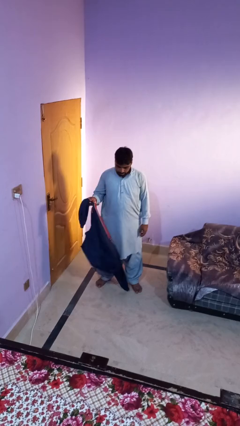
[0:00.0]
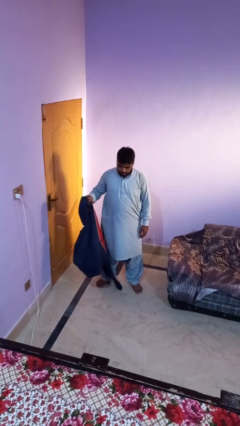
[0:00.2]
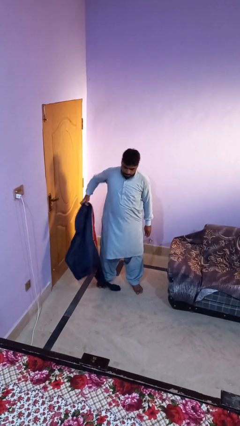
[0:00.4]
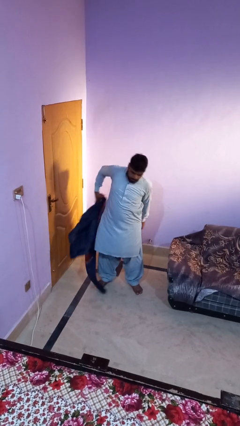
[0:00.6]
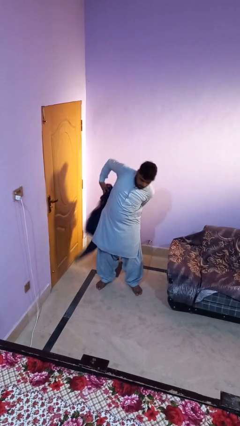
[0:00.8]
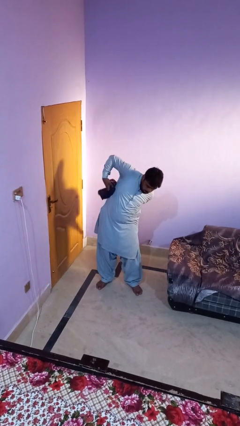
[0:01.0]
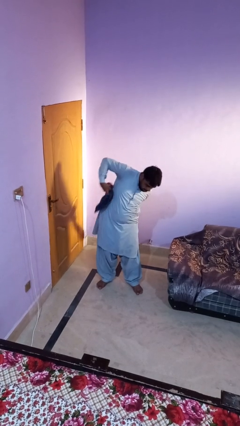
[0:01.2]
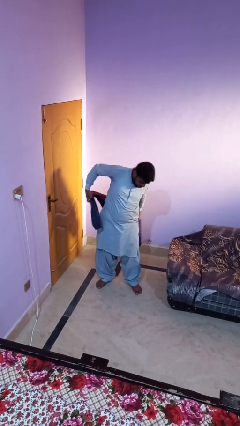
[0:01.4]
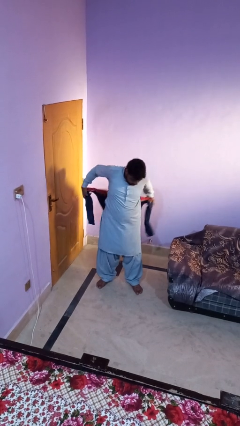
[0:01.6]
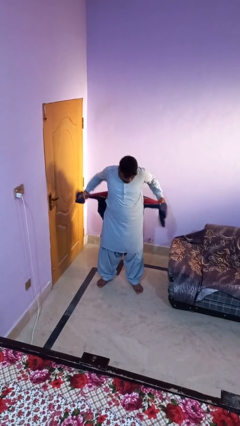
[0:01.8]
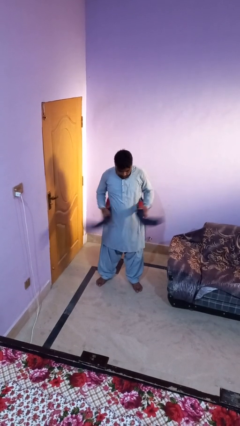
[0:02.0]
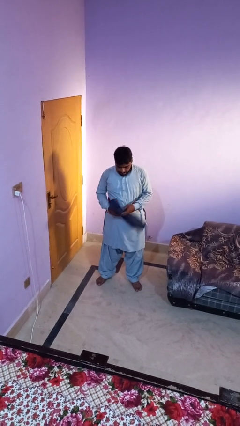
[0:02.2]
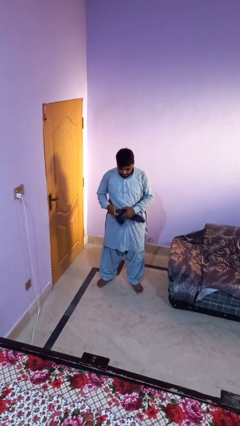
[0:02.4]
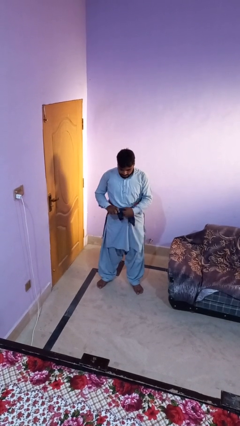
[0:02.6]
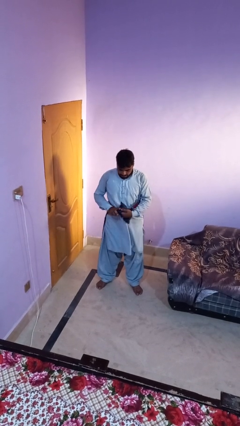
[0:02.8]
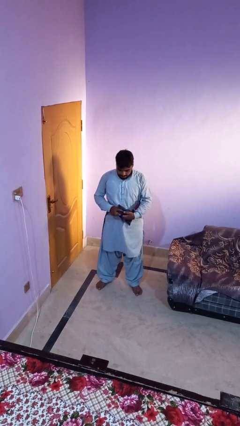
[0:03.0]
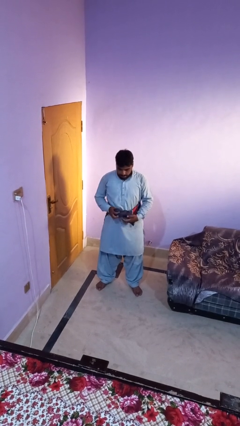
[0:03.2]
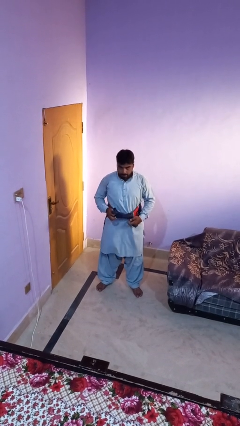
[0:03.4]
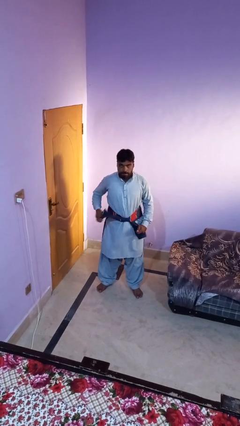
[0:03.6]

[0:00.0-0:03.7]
person ties jacket around waist

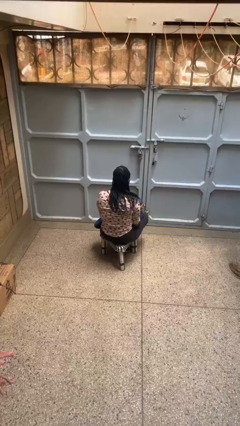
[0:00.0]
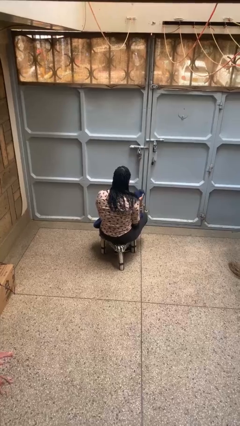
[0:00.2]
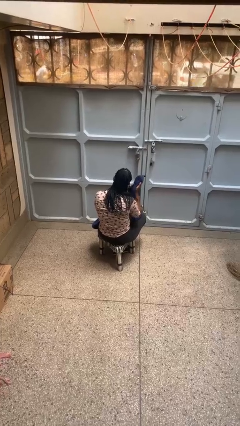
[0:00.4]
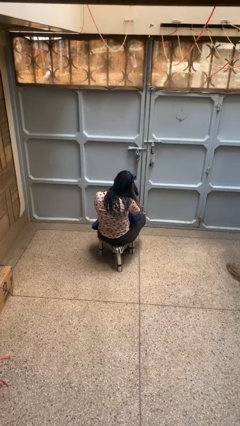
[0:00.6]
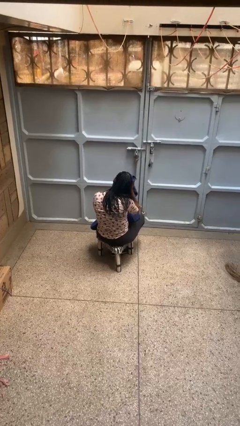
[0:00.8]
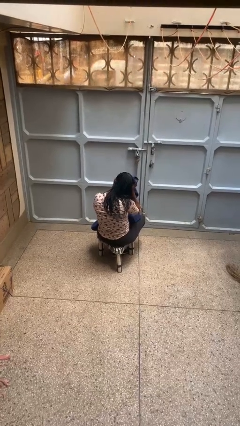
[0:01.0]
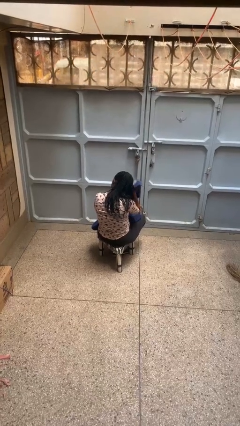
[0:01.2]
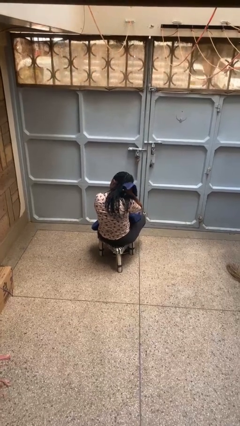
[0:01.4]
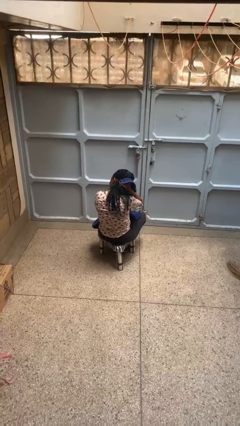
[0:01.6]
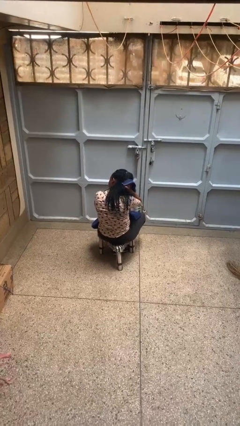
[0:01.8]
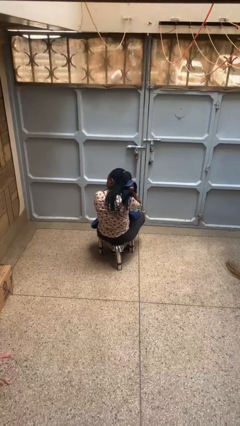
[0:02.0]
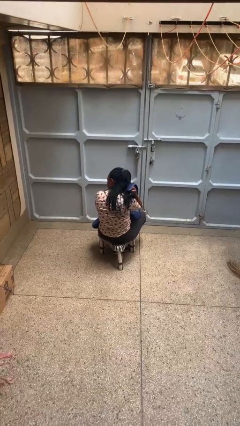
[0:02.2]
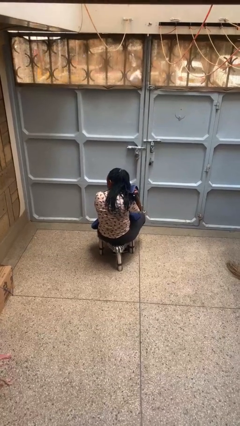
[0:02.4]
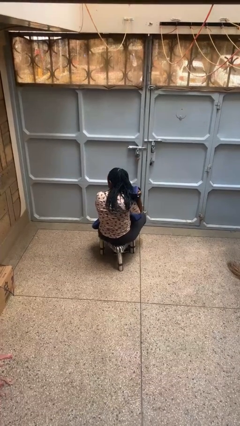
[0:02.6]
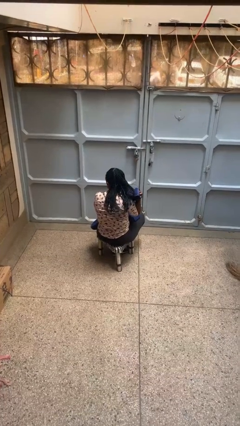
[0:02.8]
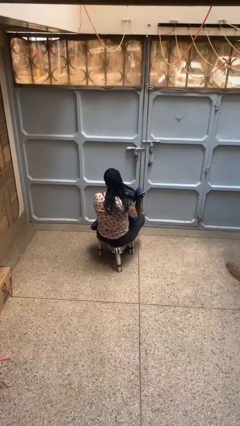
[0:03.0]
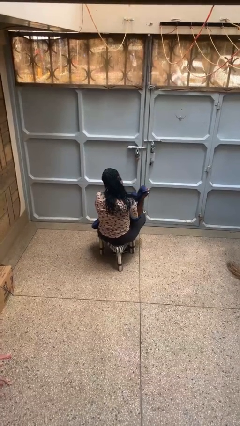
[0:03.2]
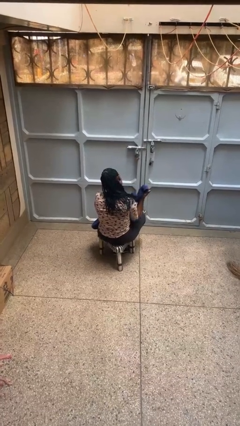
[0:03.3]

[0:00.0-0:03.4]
person dries hair with towel

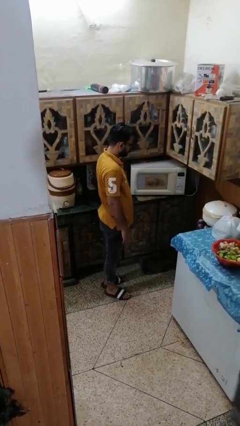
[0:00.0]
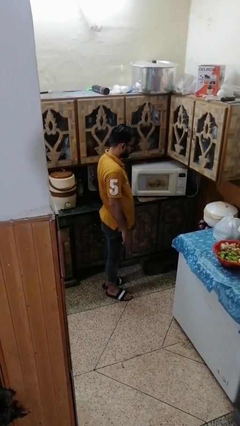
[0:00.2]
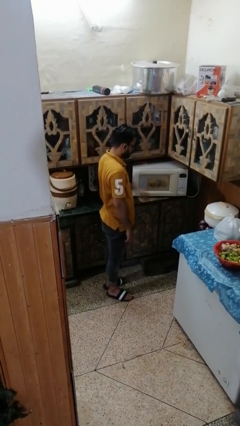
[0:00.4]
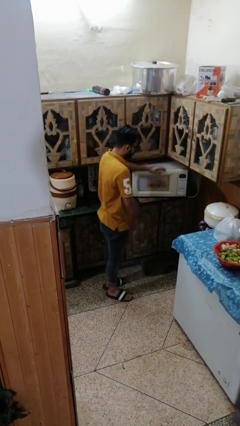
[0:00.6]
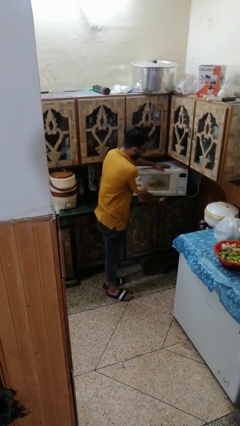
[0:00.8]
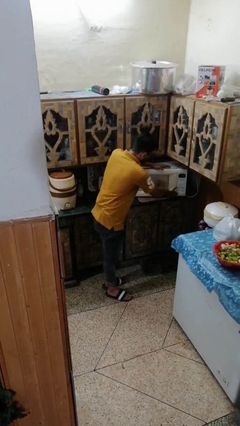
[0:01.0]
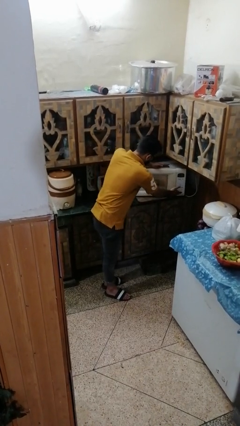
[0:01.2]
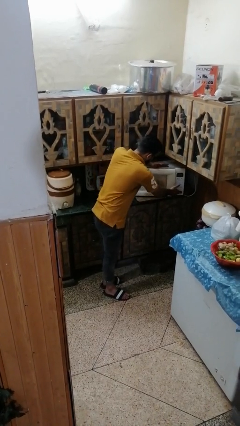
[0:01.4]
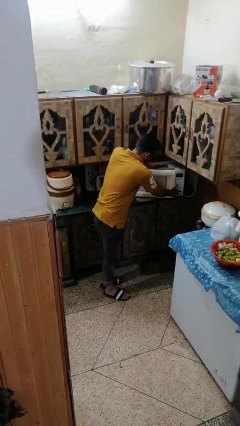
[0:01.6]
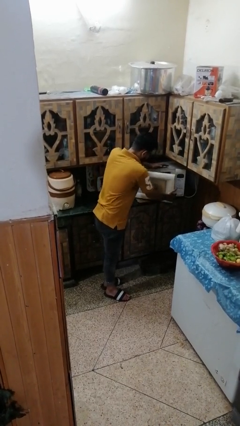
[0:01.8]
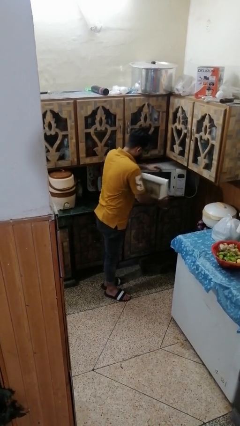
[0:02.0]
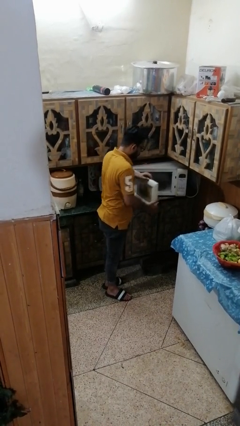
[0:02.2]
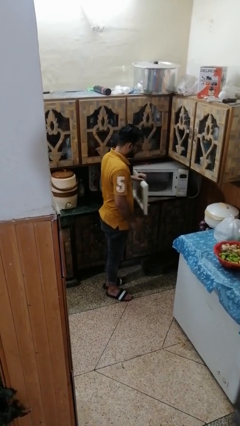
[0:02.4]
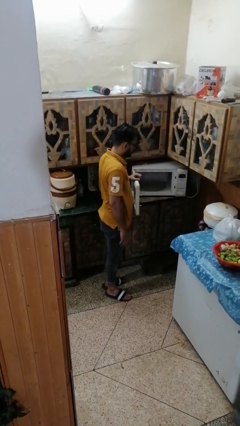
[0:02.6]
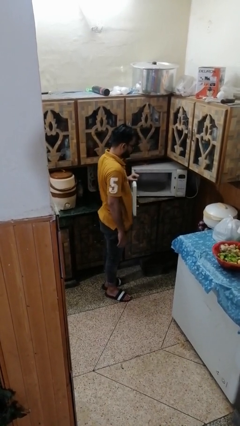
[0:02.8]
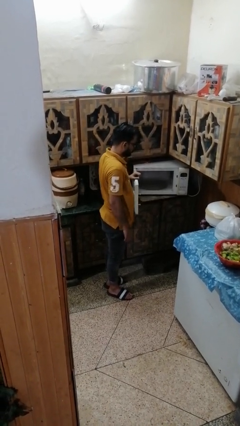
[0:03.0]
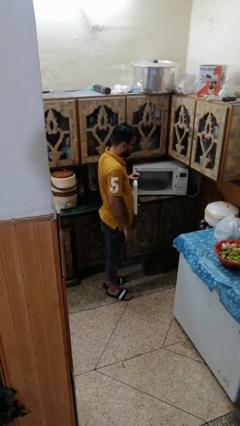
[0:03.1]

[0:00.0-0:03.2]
person opens microwave

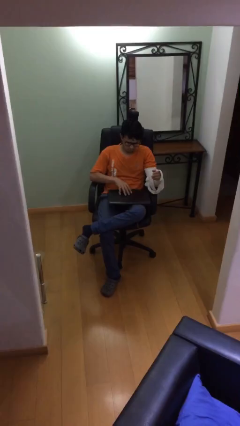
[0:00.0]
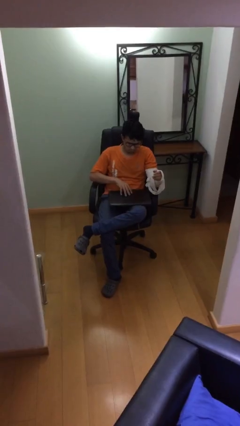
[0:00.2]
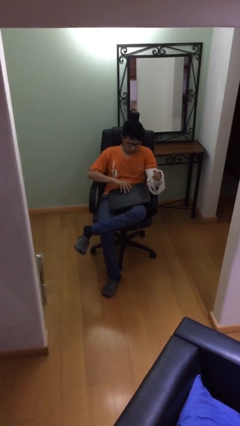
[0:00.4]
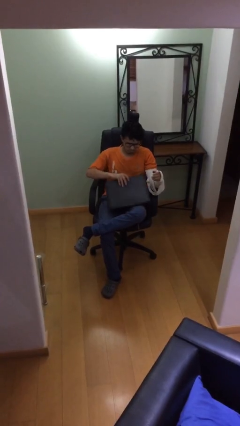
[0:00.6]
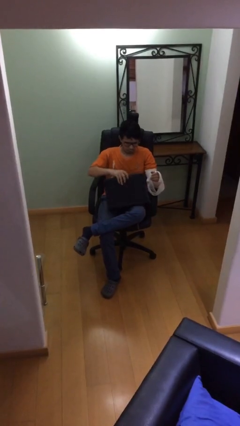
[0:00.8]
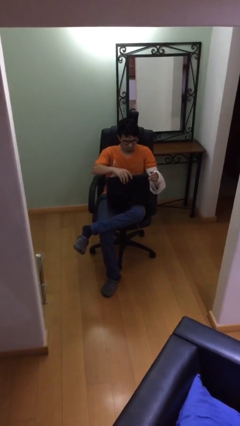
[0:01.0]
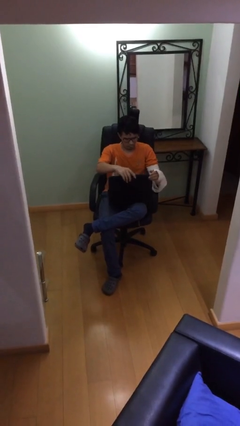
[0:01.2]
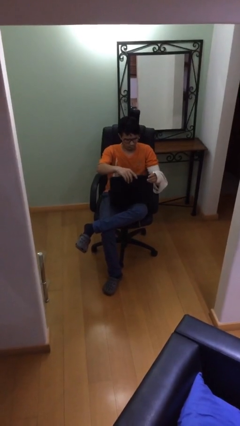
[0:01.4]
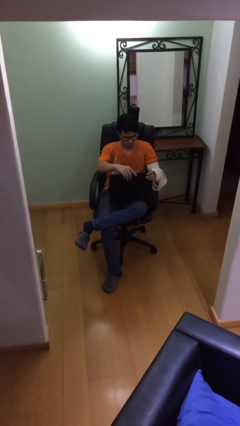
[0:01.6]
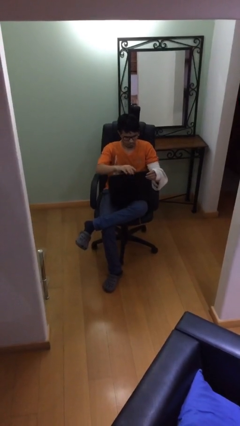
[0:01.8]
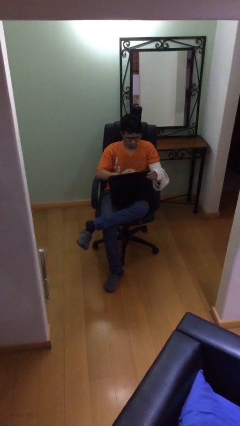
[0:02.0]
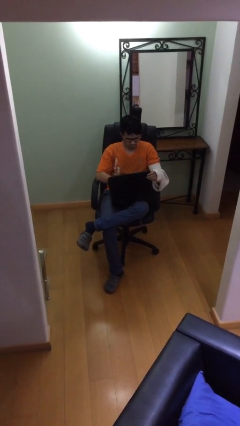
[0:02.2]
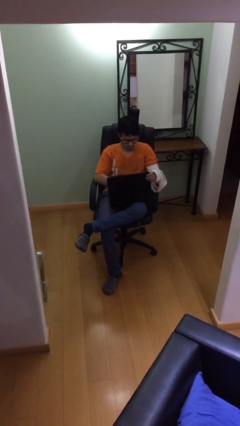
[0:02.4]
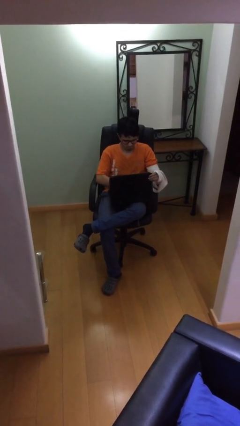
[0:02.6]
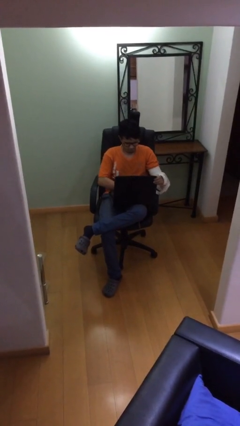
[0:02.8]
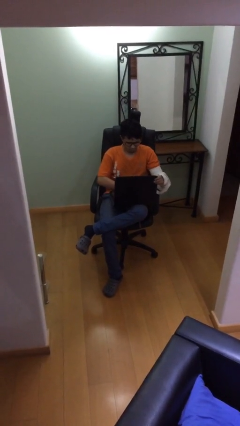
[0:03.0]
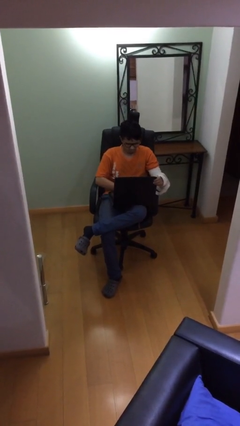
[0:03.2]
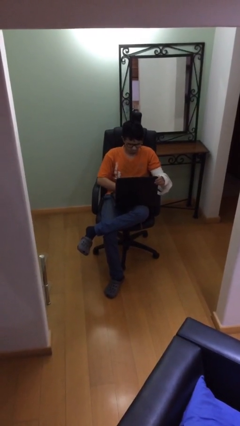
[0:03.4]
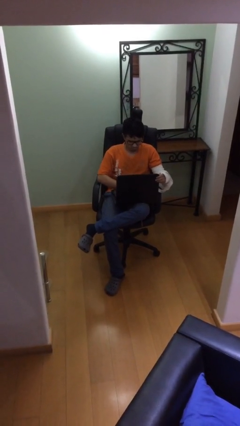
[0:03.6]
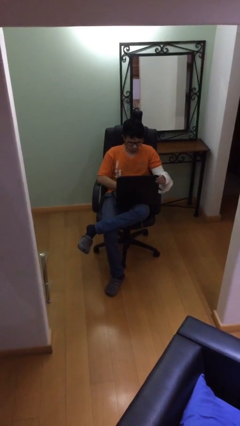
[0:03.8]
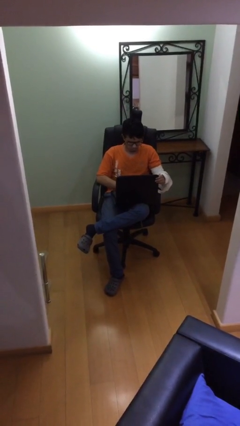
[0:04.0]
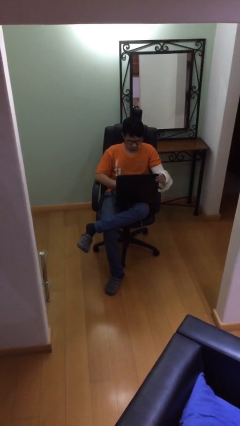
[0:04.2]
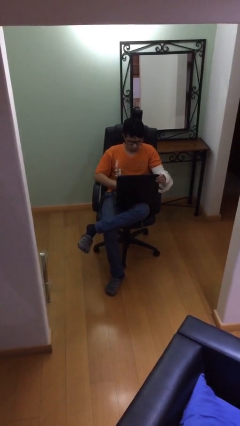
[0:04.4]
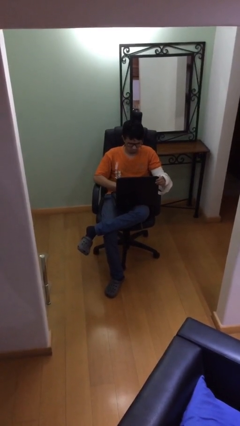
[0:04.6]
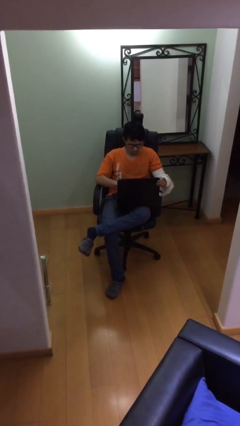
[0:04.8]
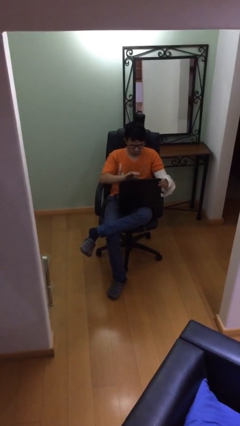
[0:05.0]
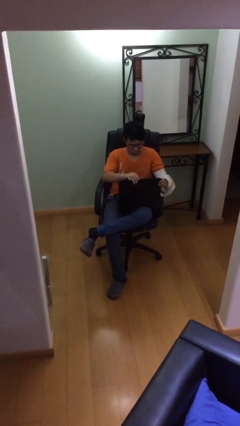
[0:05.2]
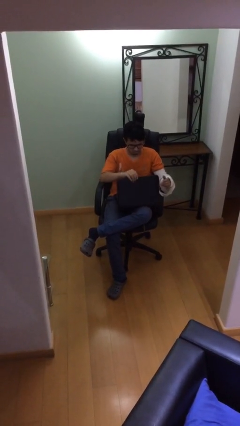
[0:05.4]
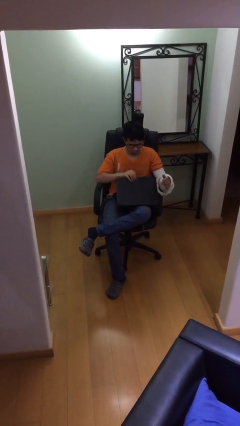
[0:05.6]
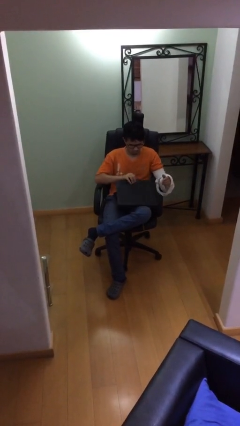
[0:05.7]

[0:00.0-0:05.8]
person interacts with laptop

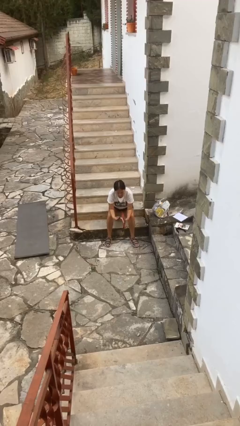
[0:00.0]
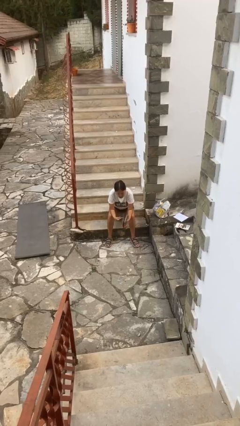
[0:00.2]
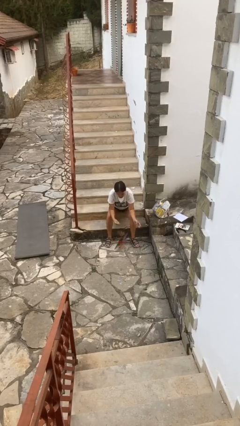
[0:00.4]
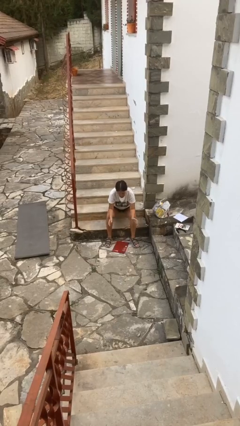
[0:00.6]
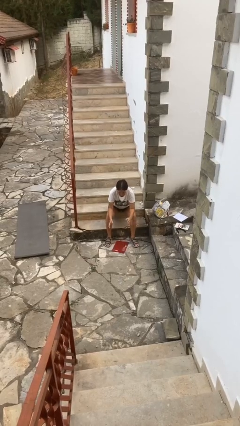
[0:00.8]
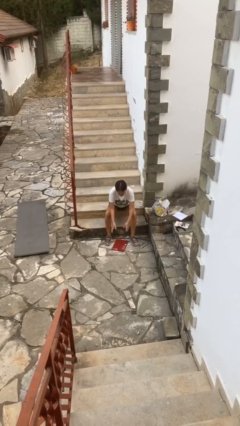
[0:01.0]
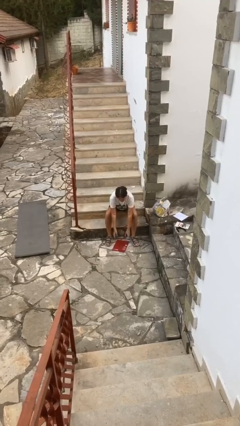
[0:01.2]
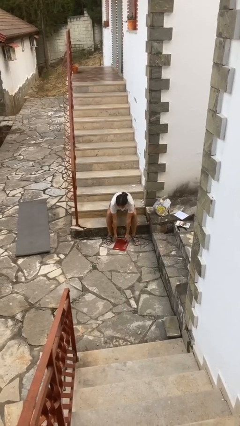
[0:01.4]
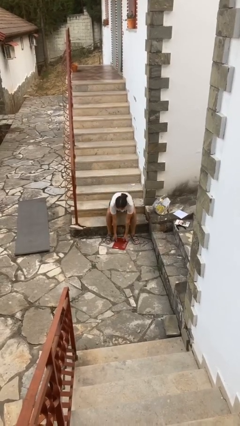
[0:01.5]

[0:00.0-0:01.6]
person drops object
